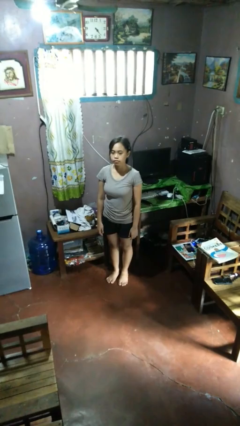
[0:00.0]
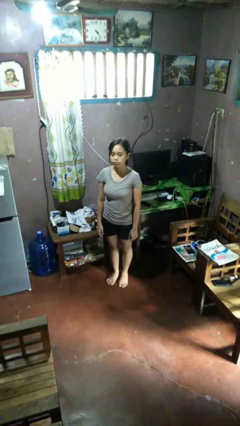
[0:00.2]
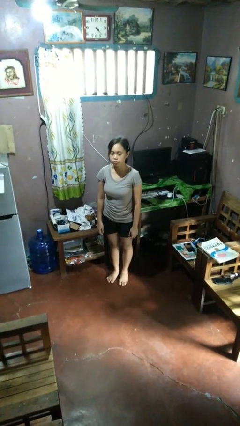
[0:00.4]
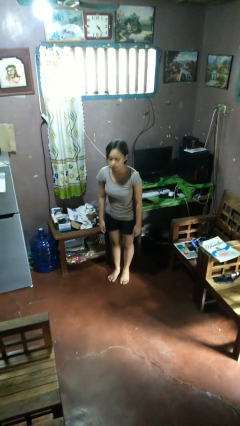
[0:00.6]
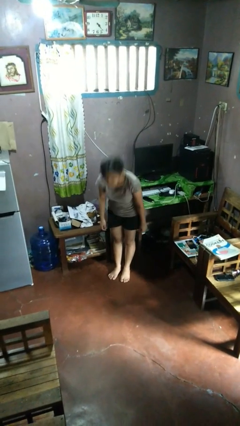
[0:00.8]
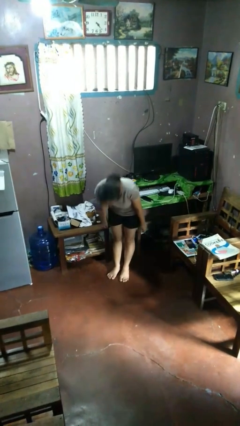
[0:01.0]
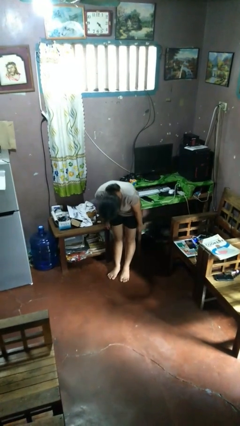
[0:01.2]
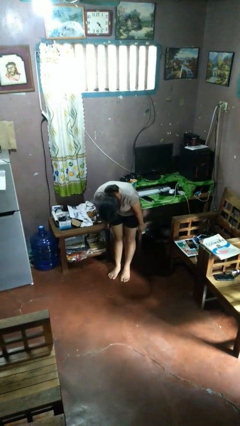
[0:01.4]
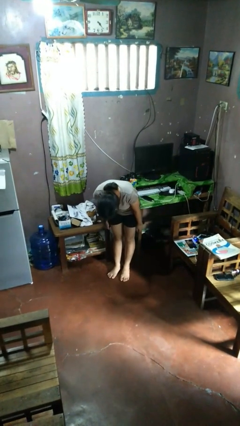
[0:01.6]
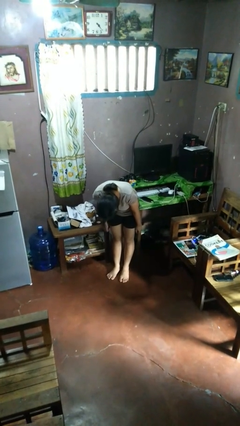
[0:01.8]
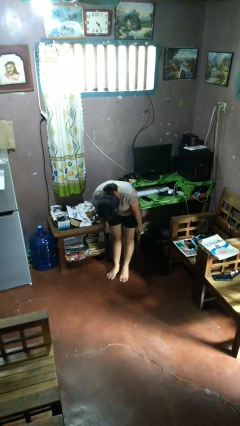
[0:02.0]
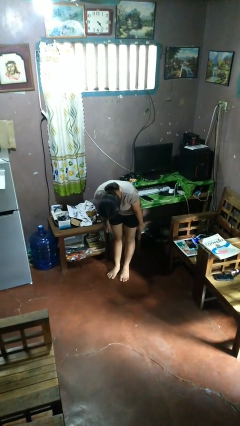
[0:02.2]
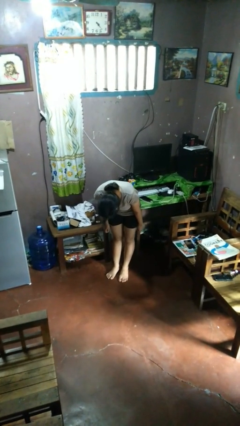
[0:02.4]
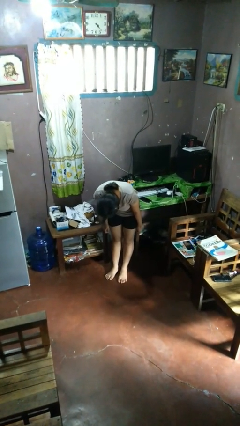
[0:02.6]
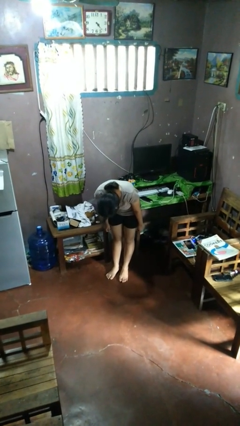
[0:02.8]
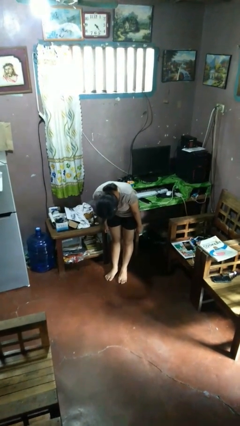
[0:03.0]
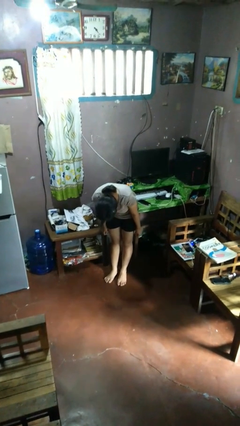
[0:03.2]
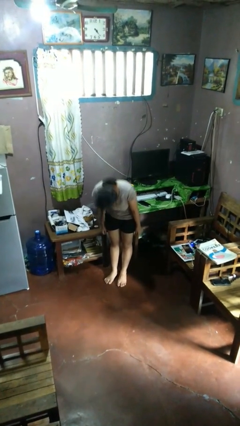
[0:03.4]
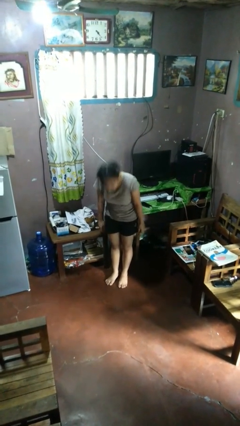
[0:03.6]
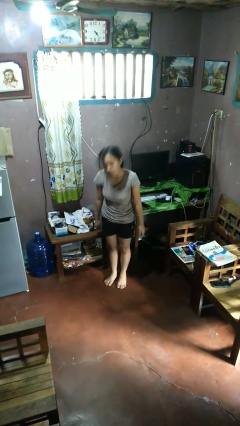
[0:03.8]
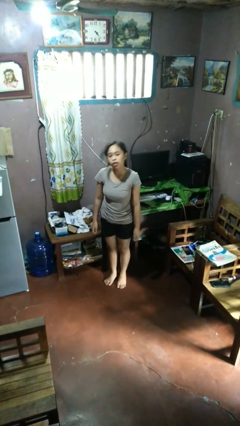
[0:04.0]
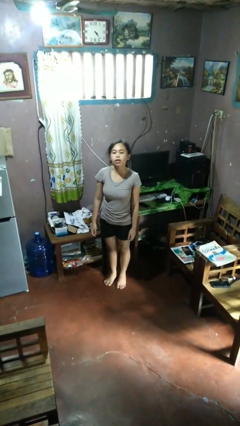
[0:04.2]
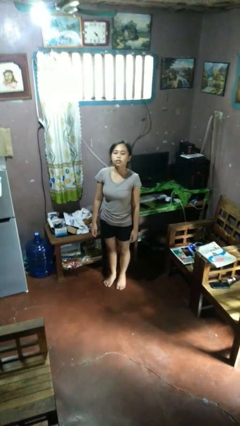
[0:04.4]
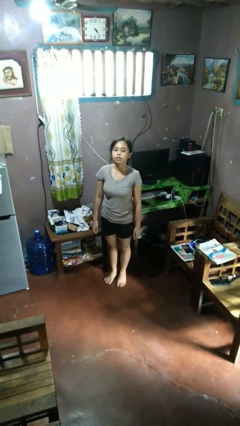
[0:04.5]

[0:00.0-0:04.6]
person bows

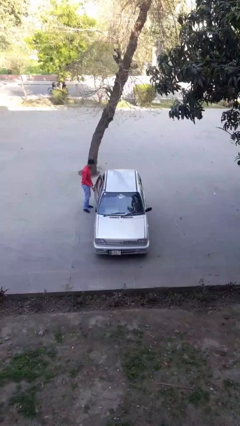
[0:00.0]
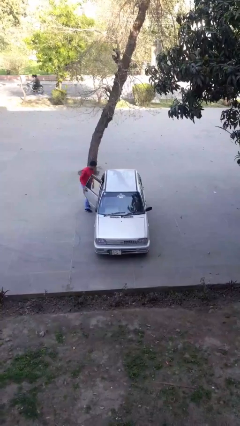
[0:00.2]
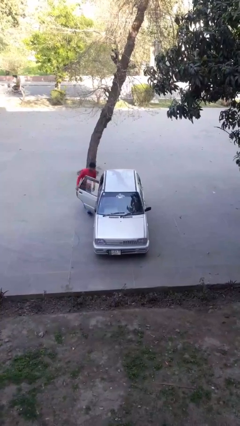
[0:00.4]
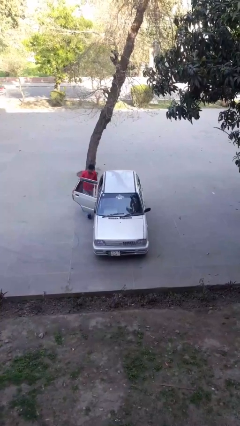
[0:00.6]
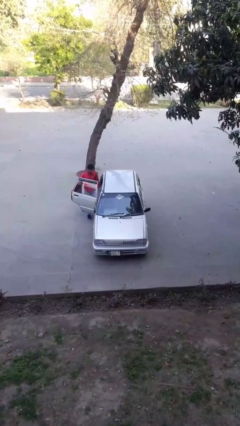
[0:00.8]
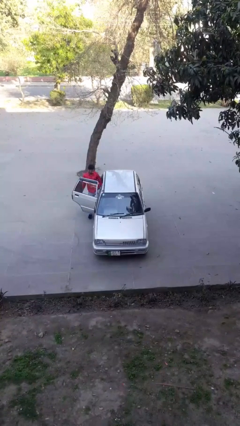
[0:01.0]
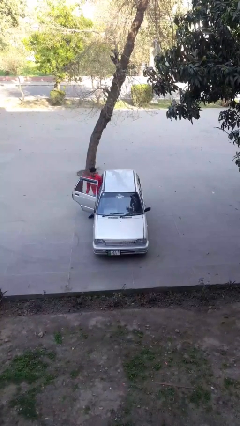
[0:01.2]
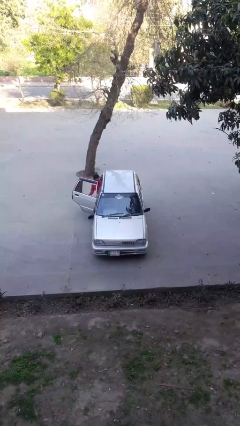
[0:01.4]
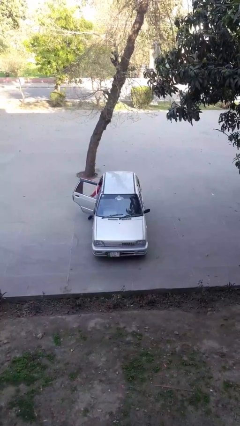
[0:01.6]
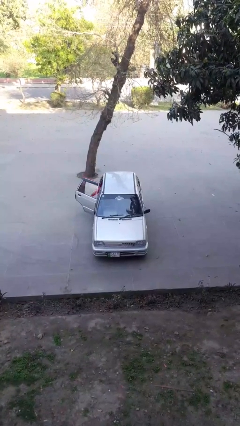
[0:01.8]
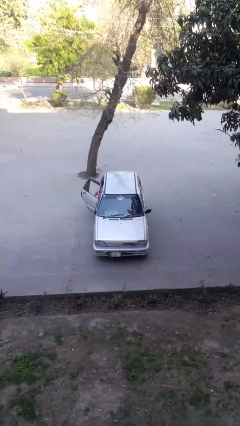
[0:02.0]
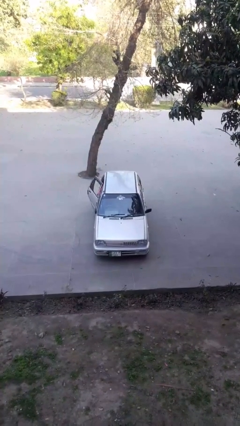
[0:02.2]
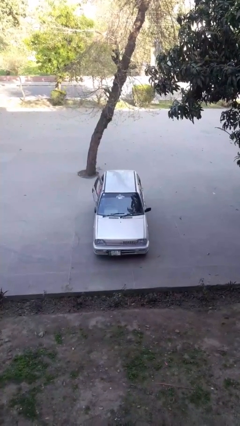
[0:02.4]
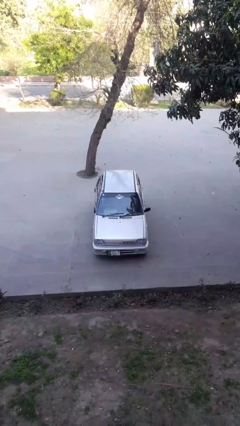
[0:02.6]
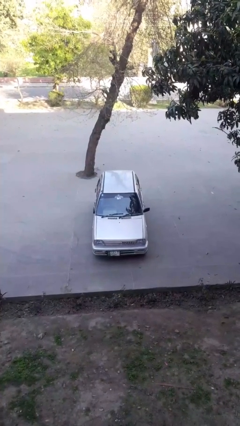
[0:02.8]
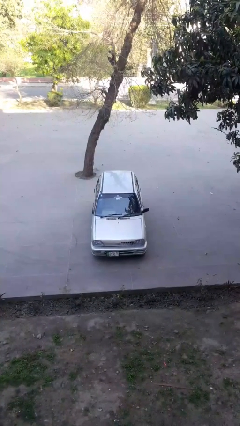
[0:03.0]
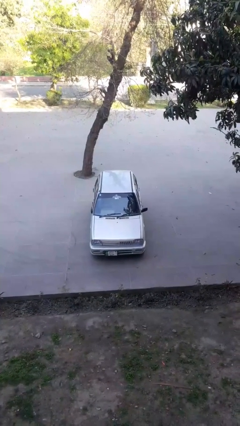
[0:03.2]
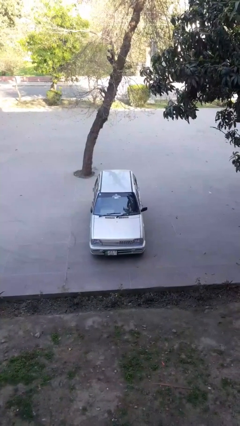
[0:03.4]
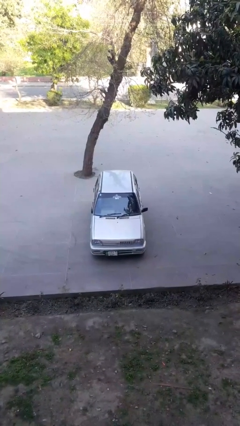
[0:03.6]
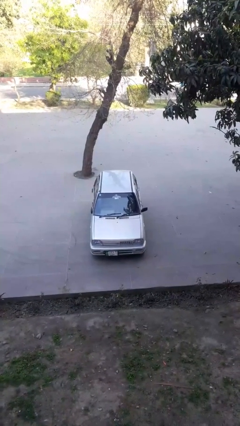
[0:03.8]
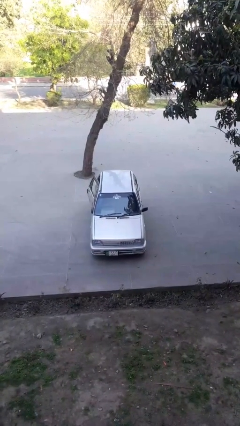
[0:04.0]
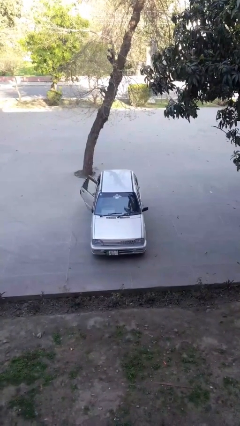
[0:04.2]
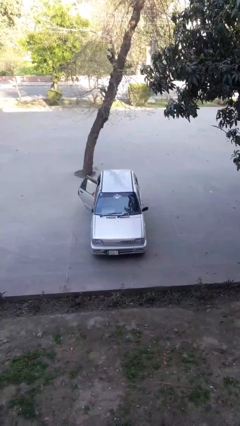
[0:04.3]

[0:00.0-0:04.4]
car picks up person

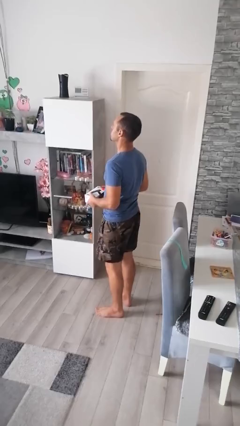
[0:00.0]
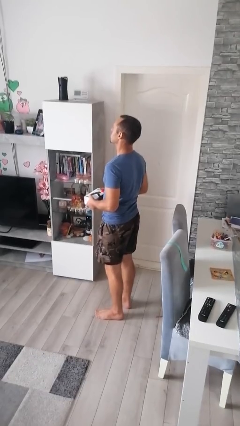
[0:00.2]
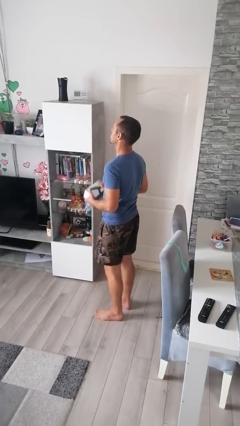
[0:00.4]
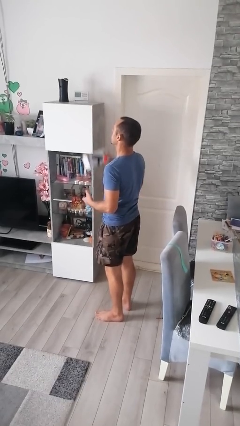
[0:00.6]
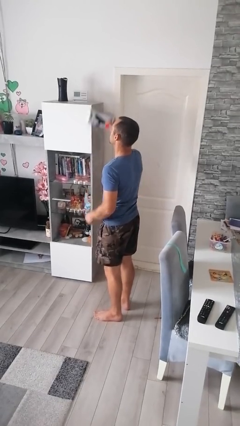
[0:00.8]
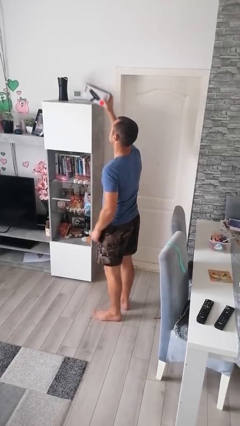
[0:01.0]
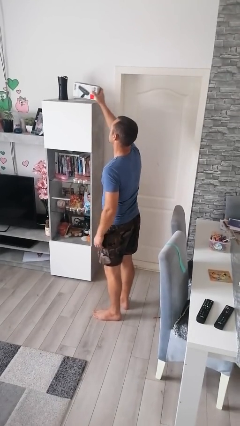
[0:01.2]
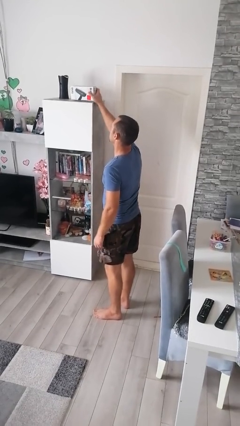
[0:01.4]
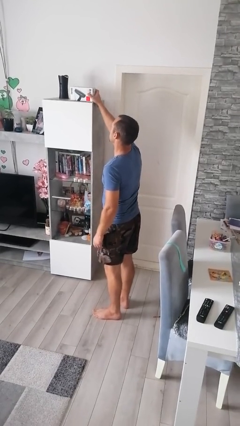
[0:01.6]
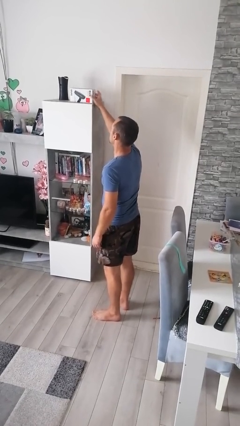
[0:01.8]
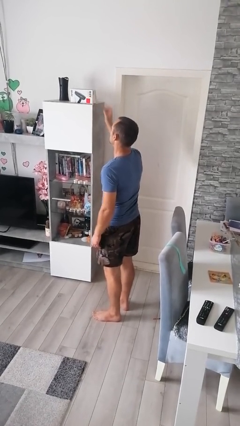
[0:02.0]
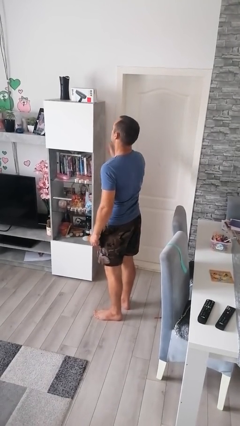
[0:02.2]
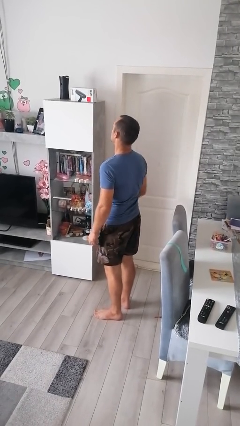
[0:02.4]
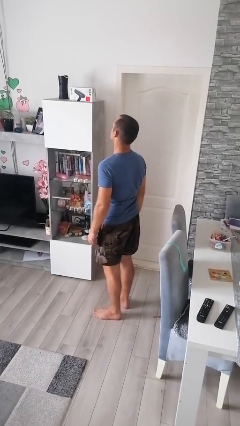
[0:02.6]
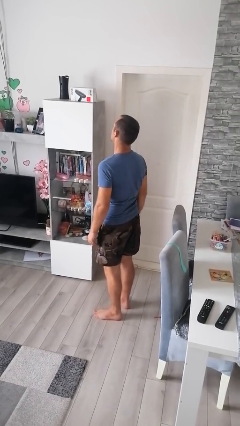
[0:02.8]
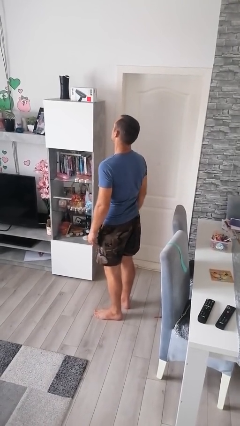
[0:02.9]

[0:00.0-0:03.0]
person picks up object from shelf

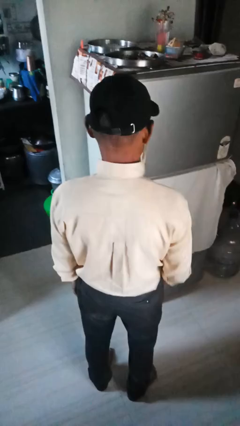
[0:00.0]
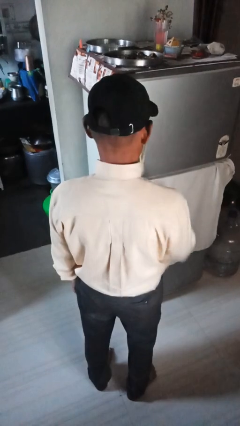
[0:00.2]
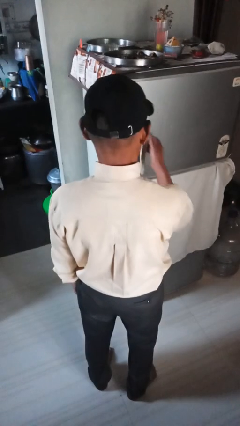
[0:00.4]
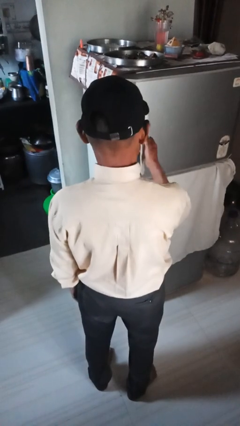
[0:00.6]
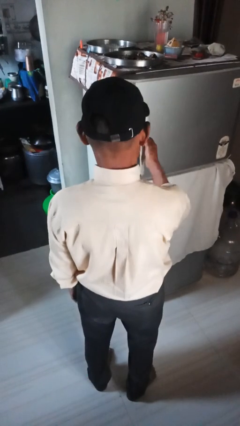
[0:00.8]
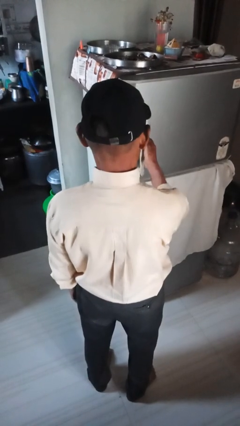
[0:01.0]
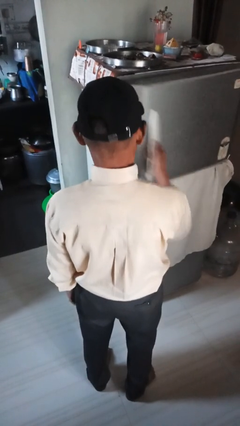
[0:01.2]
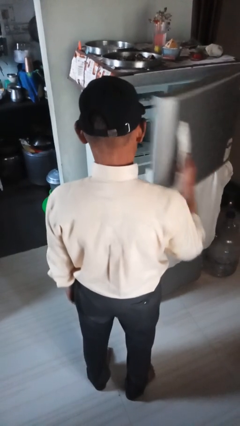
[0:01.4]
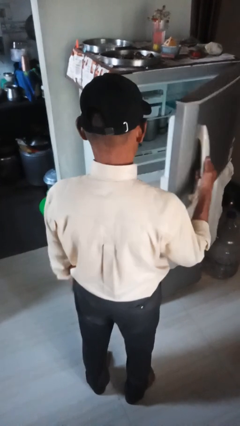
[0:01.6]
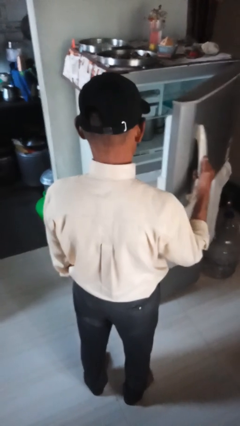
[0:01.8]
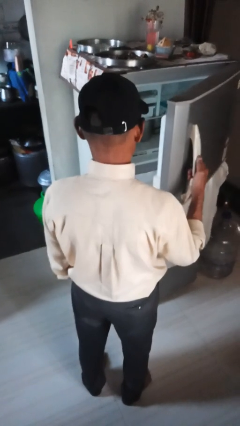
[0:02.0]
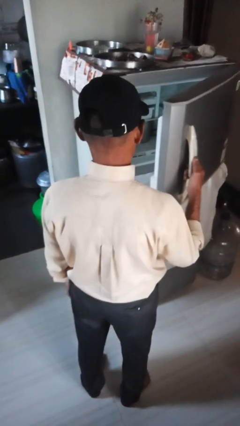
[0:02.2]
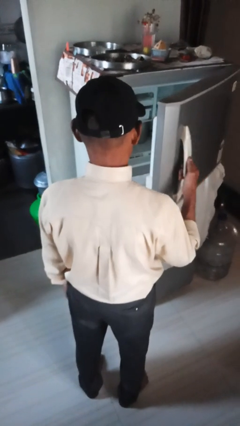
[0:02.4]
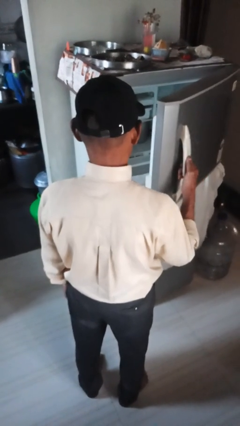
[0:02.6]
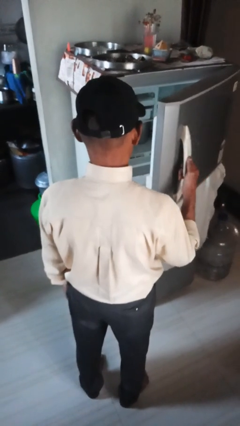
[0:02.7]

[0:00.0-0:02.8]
person opens clothes washer

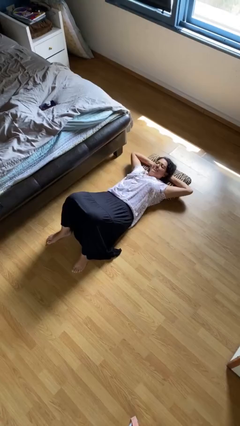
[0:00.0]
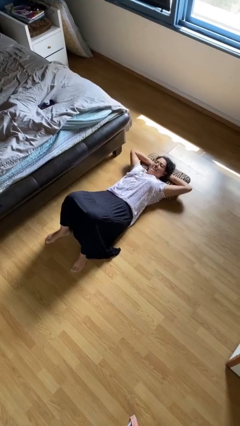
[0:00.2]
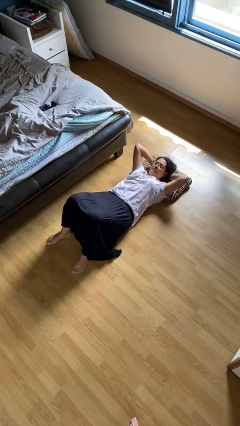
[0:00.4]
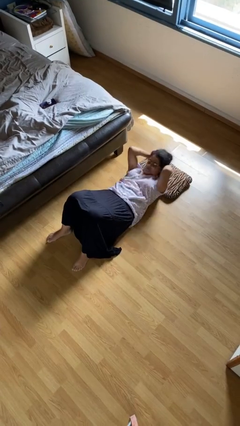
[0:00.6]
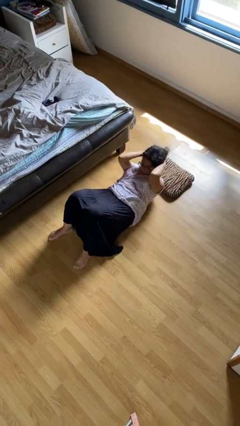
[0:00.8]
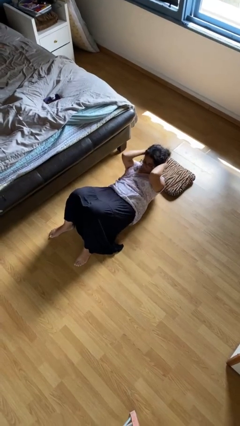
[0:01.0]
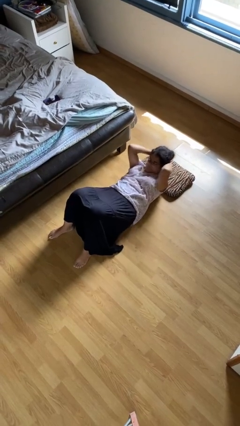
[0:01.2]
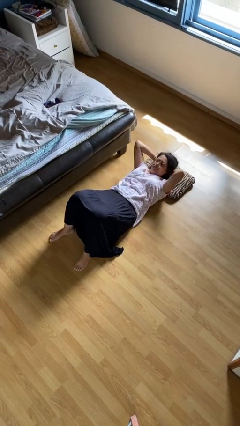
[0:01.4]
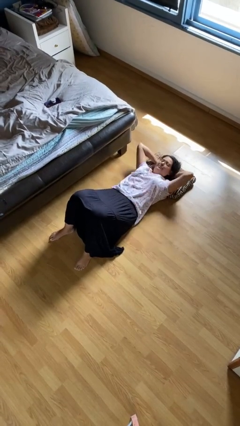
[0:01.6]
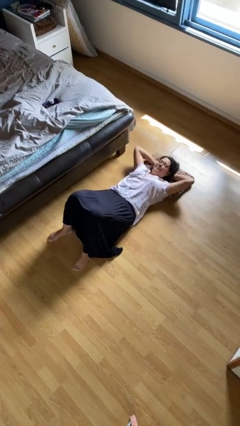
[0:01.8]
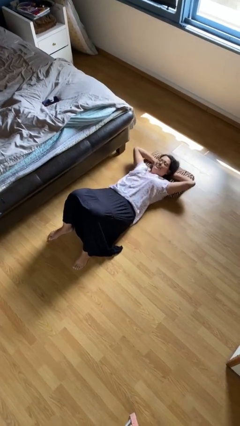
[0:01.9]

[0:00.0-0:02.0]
person exercises with situp

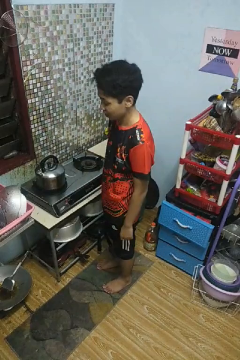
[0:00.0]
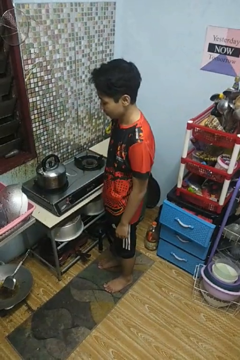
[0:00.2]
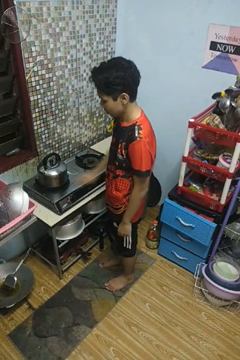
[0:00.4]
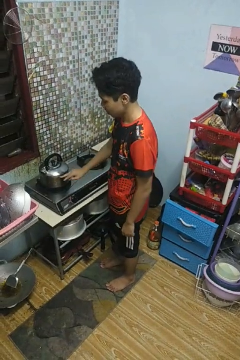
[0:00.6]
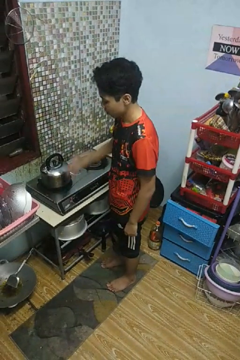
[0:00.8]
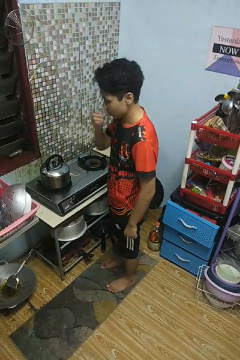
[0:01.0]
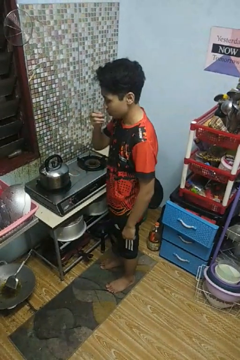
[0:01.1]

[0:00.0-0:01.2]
person burns hand
